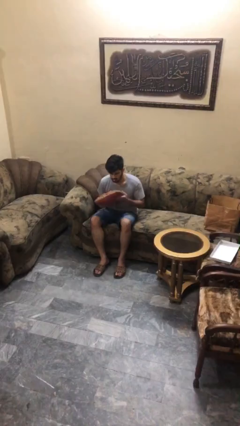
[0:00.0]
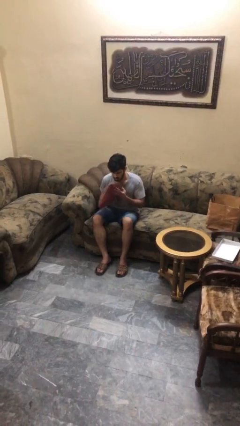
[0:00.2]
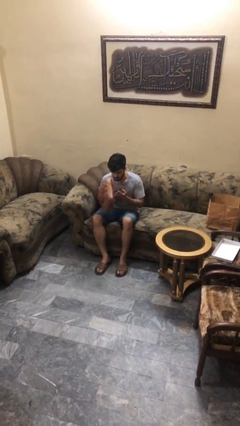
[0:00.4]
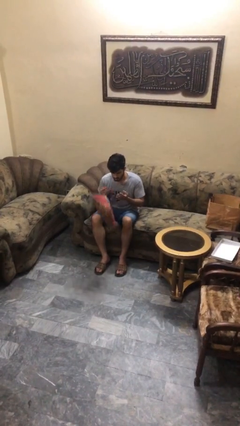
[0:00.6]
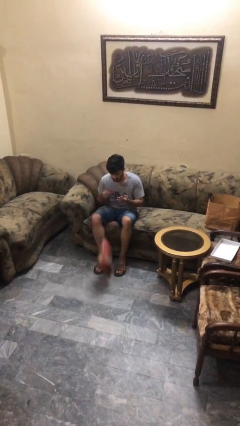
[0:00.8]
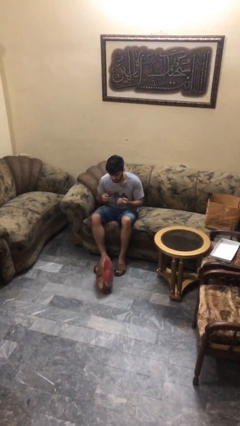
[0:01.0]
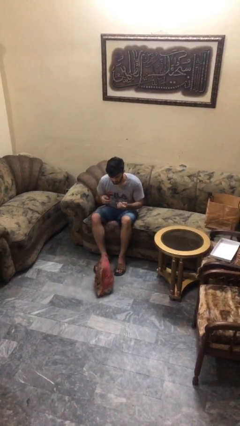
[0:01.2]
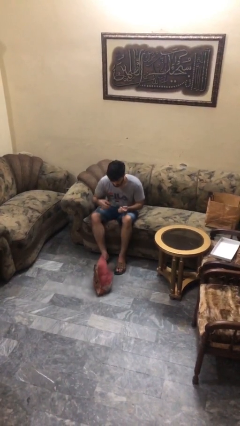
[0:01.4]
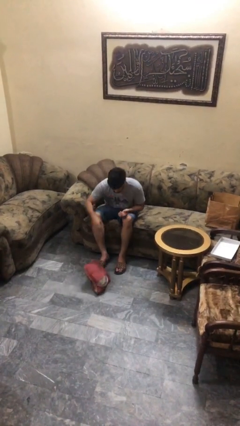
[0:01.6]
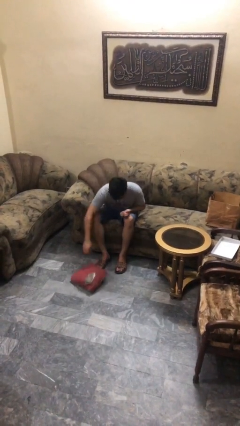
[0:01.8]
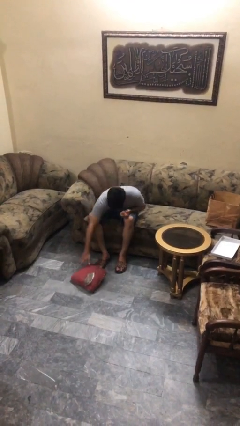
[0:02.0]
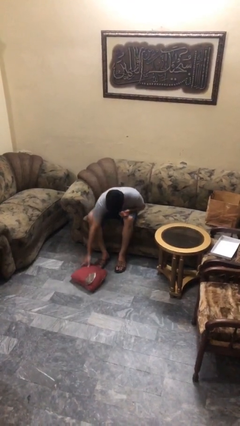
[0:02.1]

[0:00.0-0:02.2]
person drops object

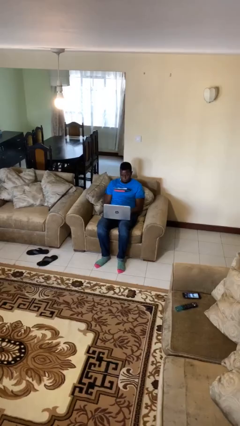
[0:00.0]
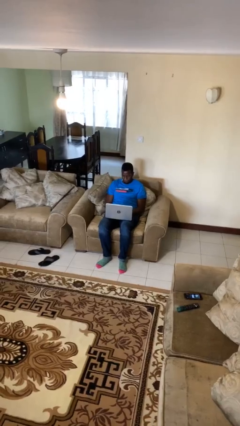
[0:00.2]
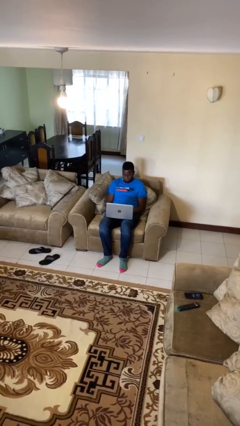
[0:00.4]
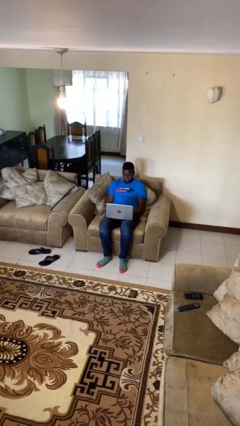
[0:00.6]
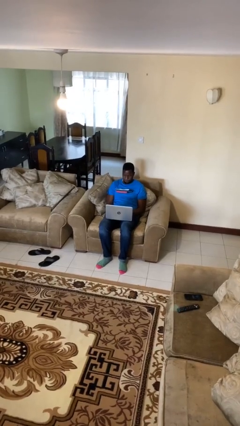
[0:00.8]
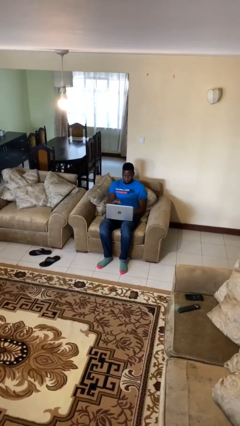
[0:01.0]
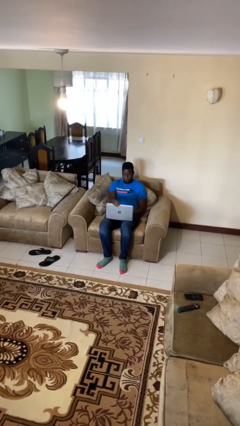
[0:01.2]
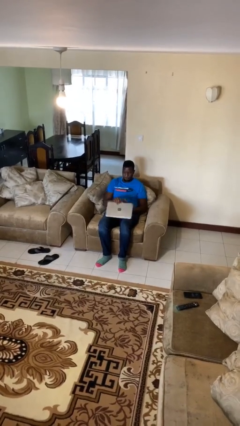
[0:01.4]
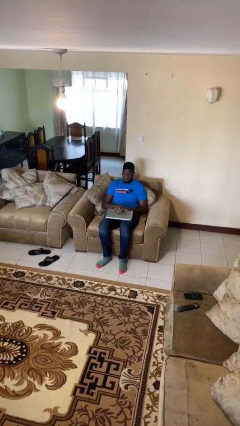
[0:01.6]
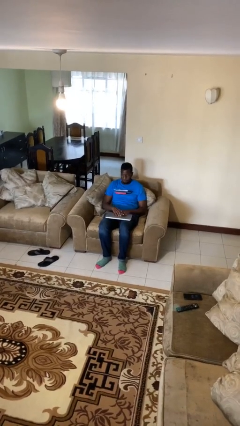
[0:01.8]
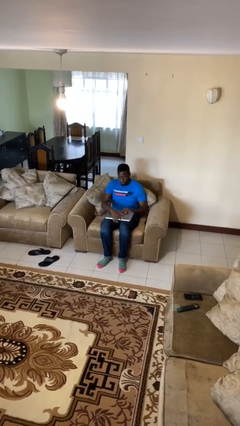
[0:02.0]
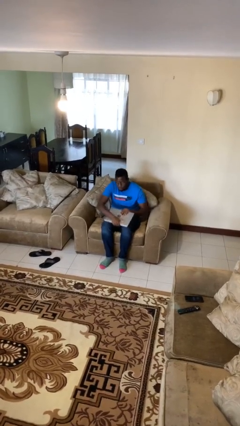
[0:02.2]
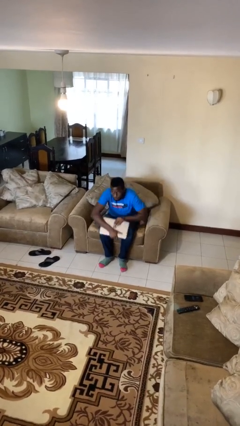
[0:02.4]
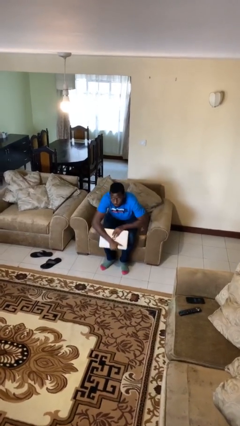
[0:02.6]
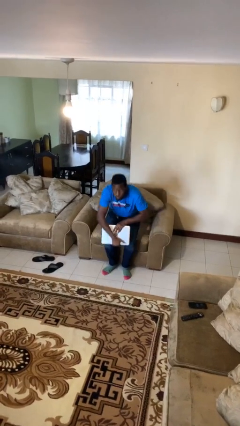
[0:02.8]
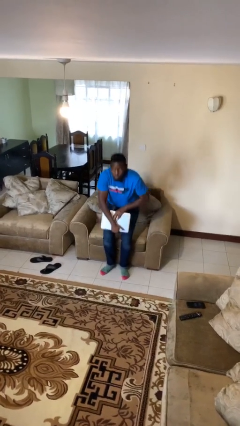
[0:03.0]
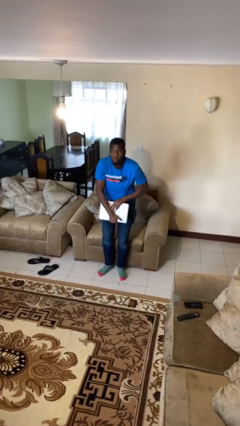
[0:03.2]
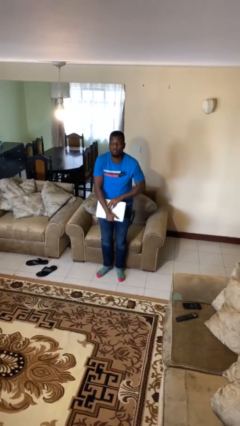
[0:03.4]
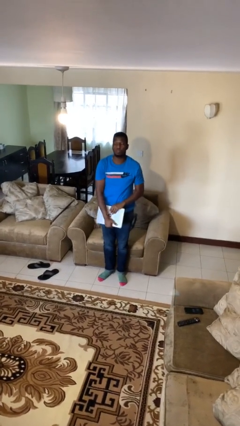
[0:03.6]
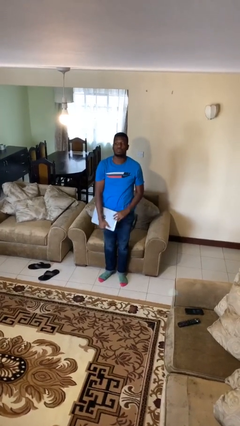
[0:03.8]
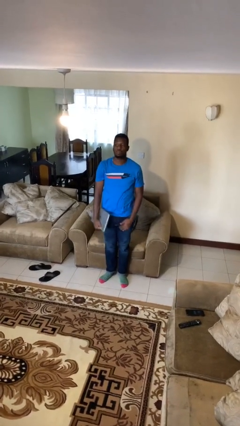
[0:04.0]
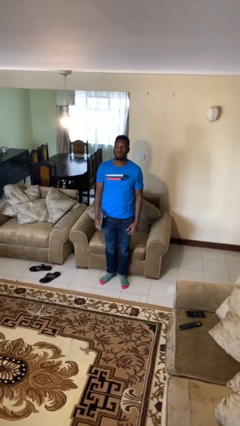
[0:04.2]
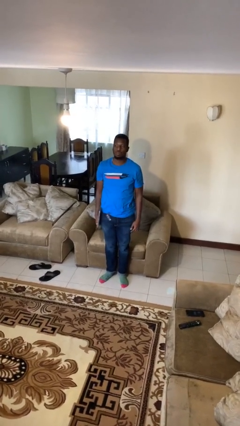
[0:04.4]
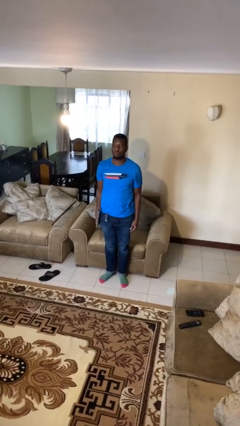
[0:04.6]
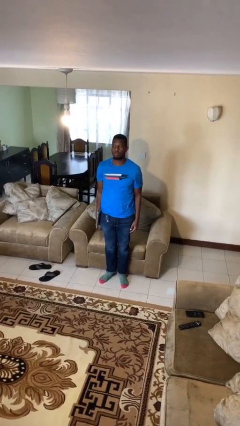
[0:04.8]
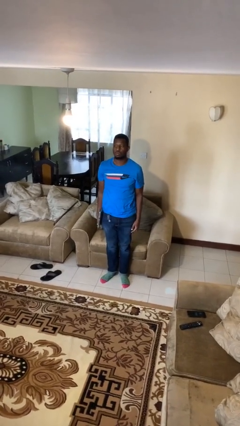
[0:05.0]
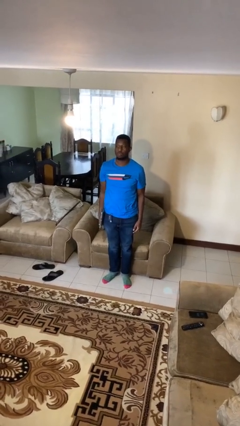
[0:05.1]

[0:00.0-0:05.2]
person stands up

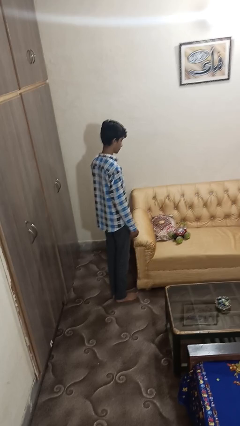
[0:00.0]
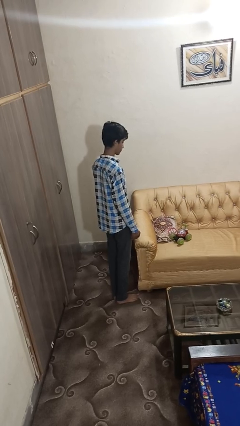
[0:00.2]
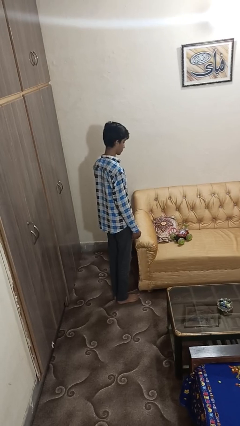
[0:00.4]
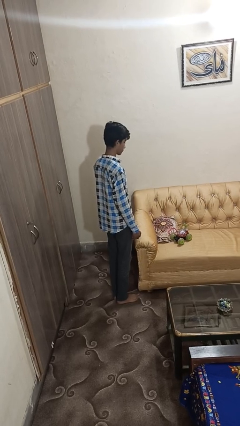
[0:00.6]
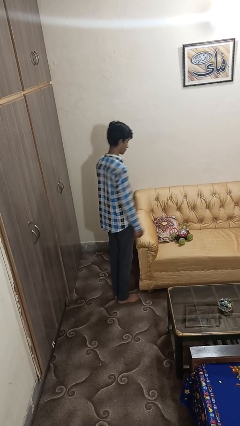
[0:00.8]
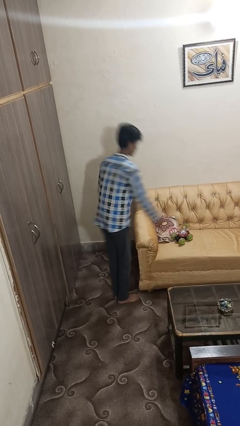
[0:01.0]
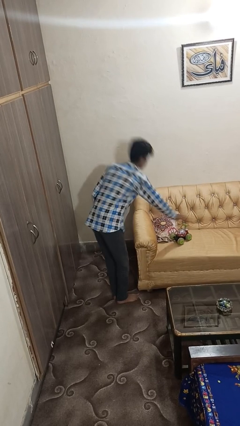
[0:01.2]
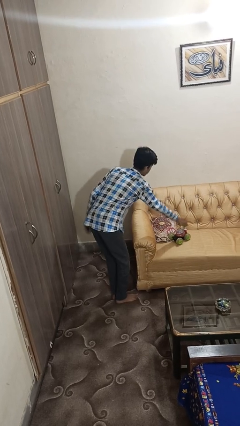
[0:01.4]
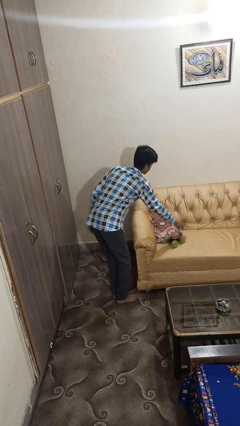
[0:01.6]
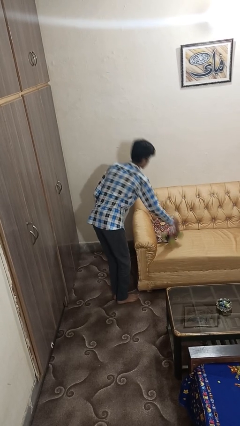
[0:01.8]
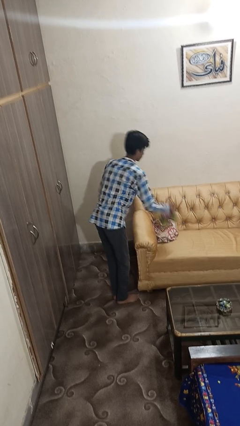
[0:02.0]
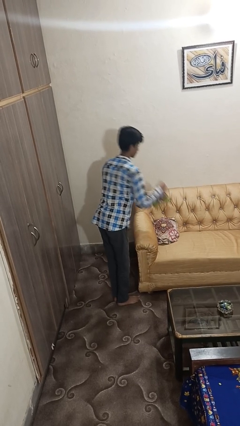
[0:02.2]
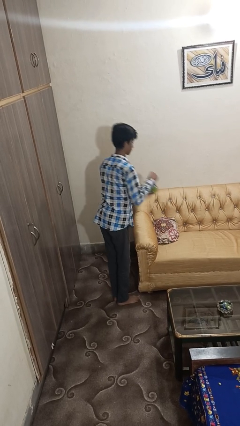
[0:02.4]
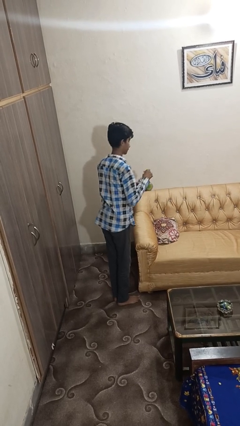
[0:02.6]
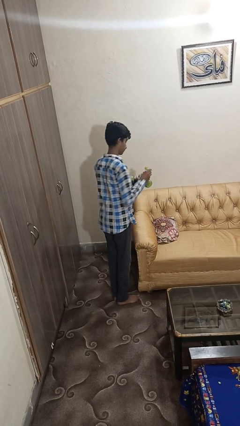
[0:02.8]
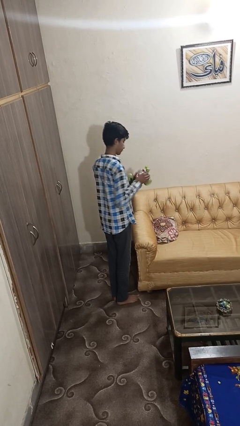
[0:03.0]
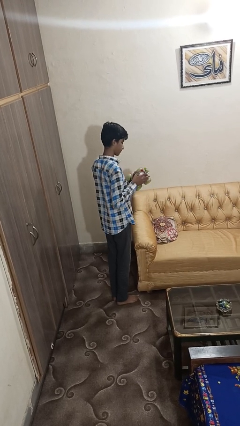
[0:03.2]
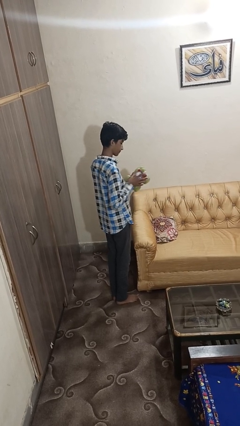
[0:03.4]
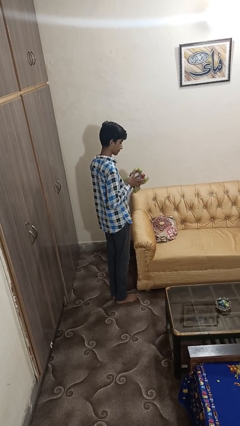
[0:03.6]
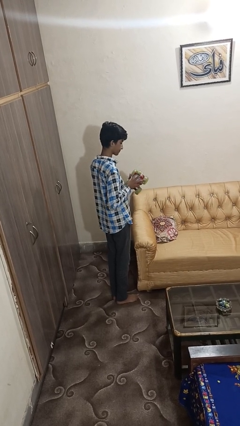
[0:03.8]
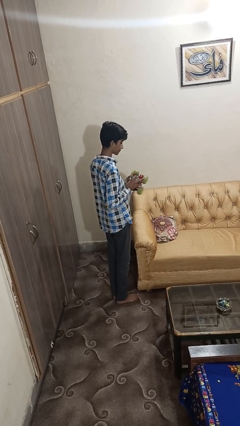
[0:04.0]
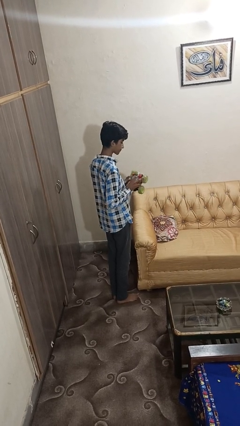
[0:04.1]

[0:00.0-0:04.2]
person picks up object from couch

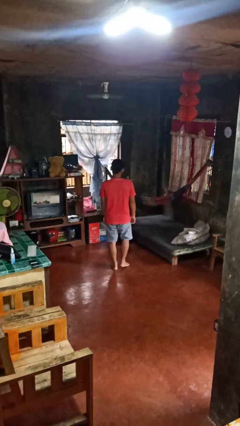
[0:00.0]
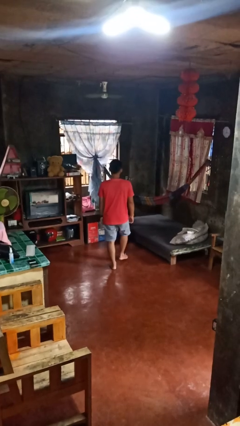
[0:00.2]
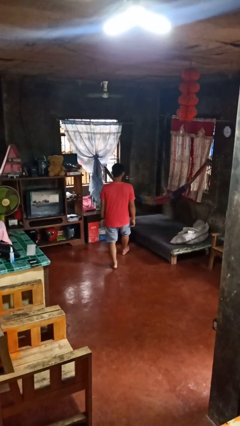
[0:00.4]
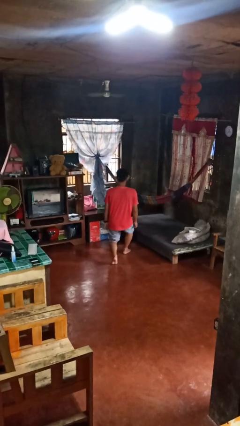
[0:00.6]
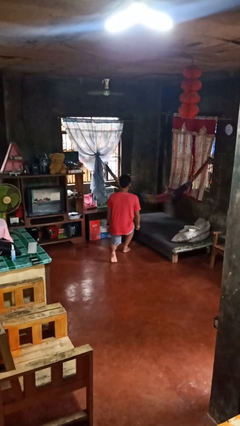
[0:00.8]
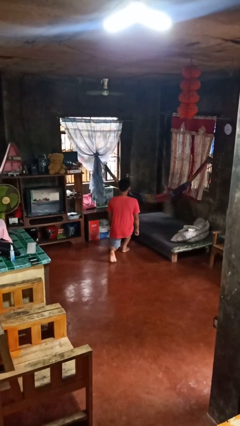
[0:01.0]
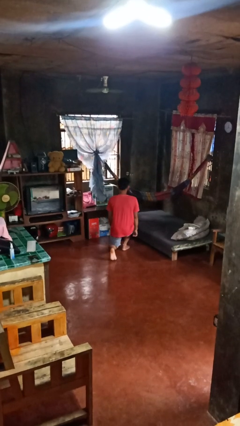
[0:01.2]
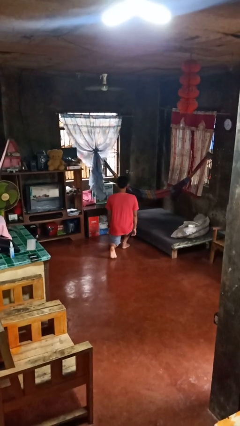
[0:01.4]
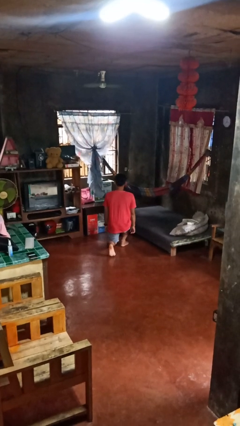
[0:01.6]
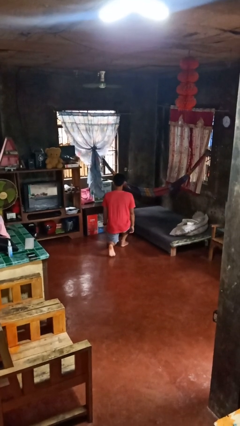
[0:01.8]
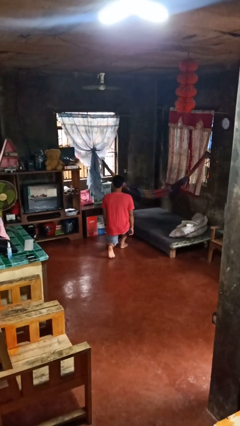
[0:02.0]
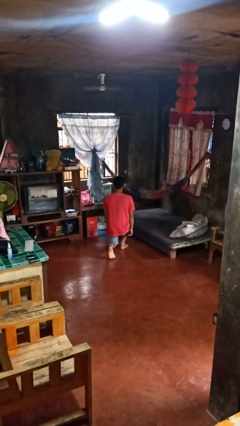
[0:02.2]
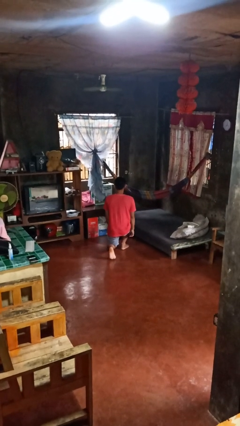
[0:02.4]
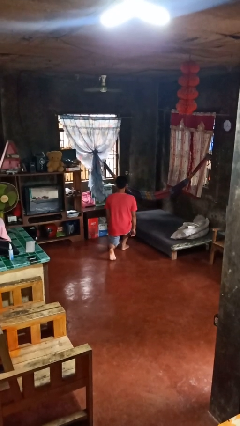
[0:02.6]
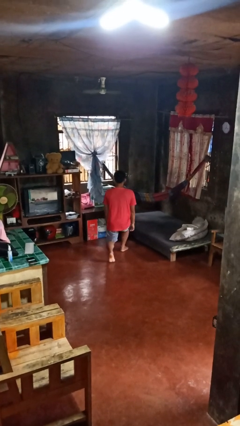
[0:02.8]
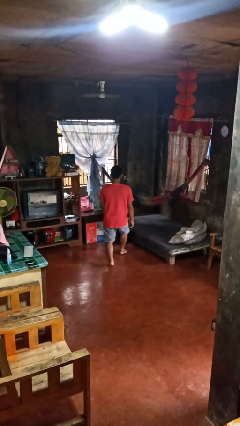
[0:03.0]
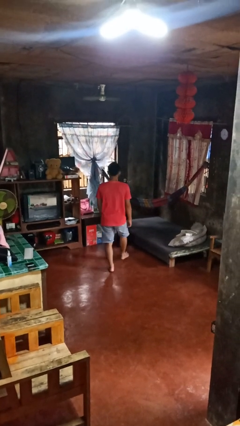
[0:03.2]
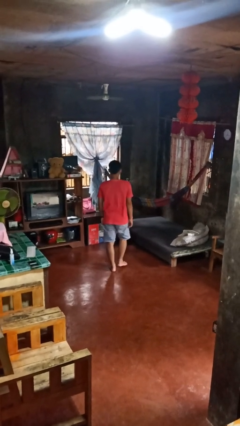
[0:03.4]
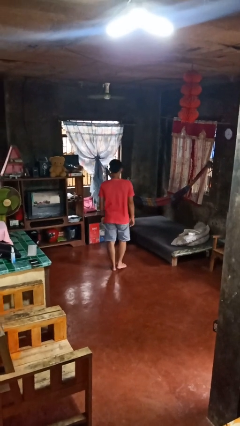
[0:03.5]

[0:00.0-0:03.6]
person exercises with lunges

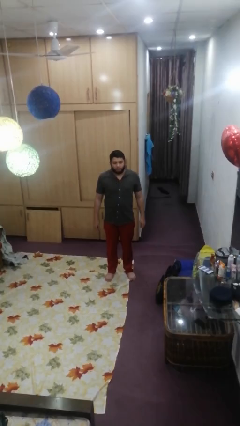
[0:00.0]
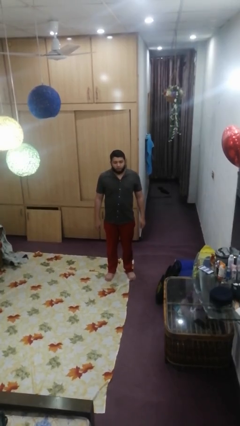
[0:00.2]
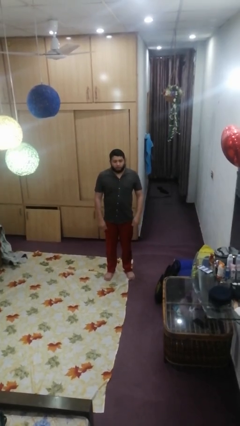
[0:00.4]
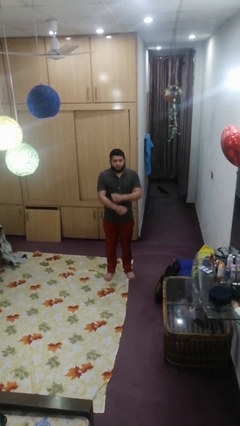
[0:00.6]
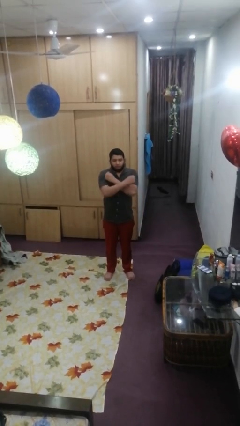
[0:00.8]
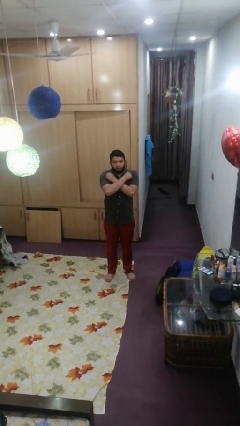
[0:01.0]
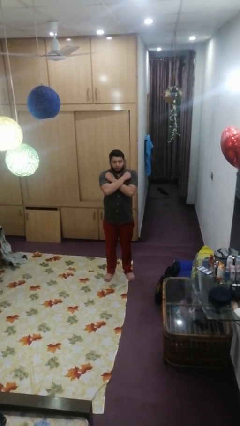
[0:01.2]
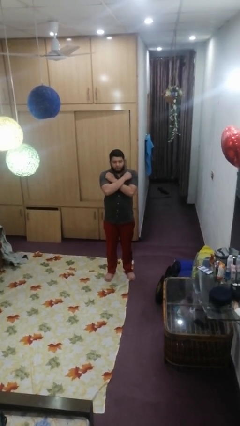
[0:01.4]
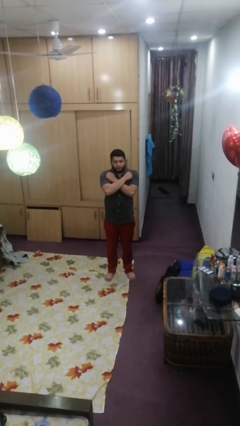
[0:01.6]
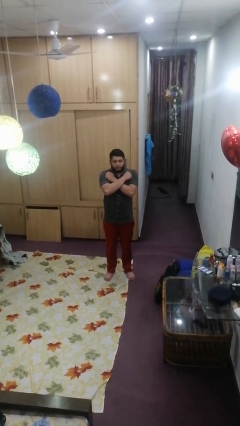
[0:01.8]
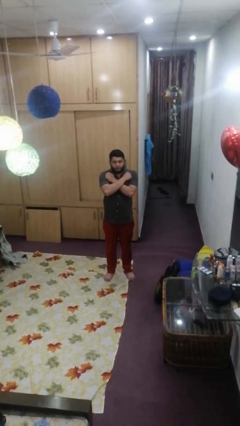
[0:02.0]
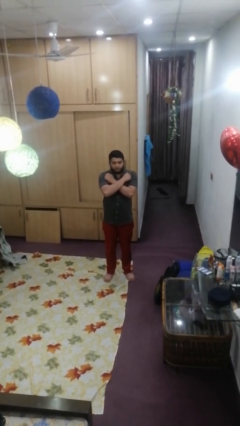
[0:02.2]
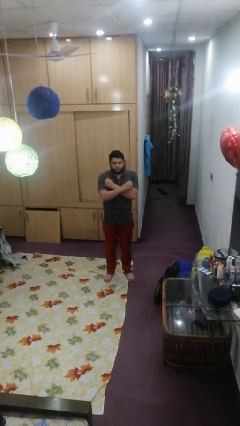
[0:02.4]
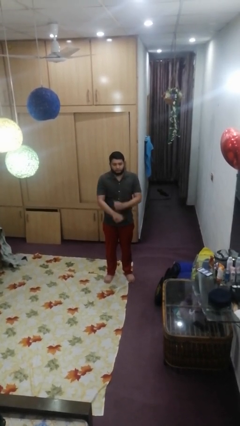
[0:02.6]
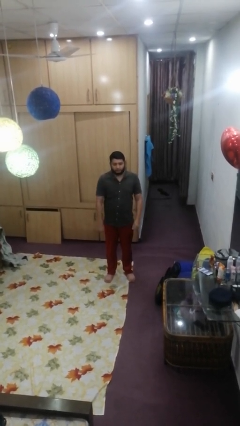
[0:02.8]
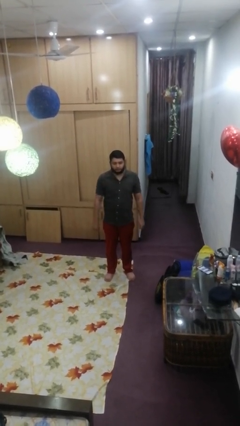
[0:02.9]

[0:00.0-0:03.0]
person crosses arms
